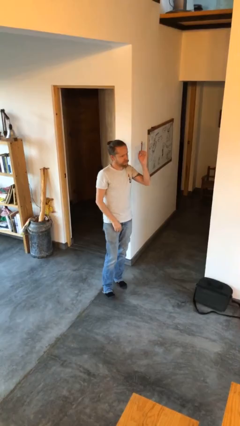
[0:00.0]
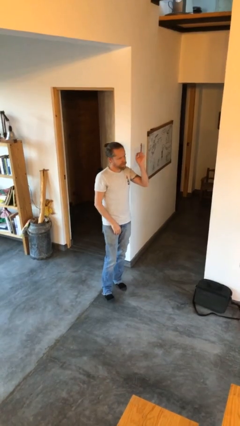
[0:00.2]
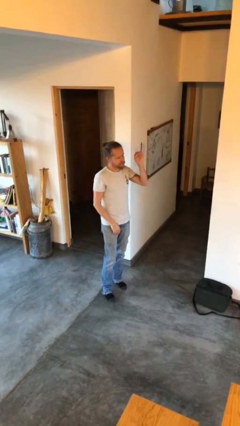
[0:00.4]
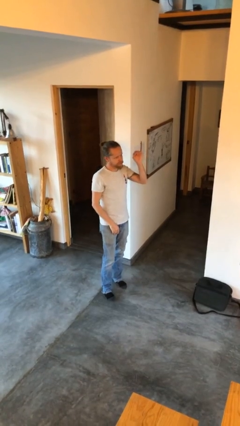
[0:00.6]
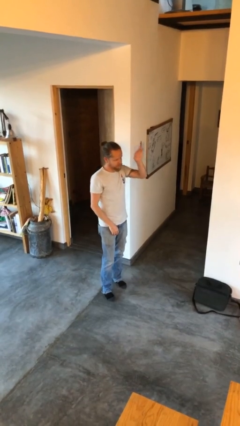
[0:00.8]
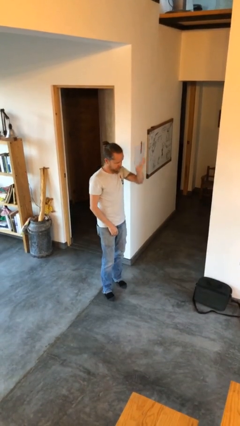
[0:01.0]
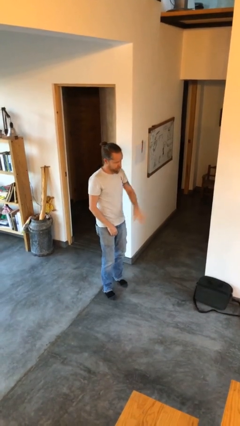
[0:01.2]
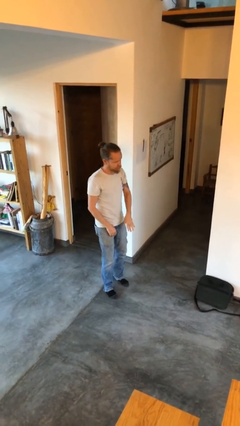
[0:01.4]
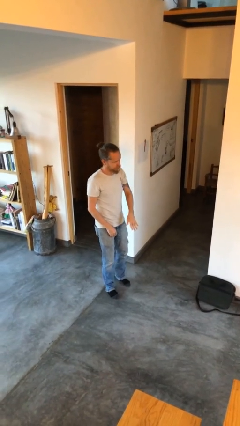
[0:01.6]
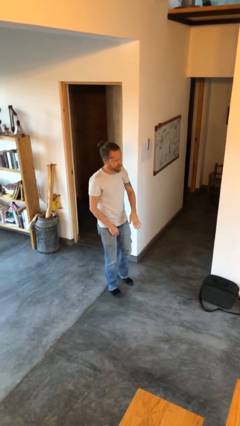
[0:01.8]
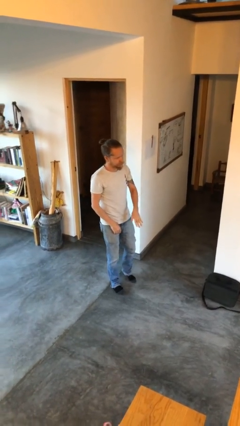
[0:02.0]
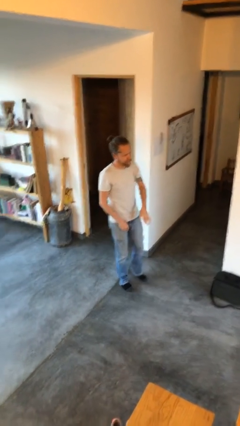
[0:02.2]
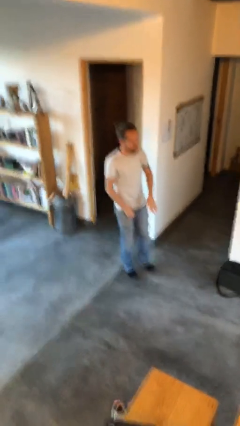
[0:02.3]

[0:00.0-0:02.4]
person gestures swipe down

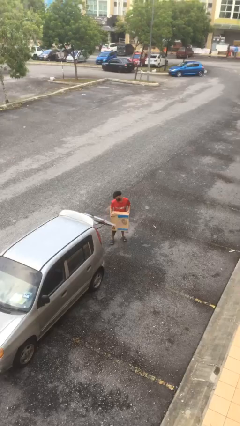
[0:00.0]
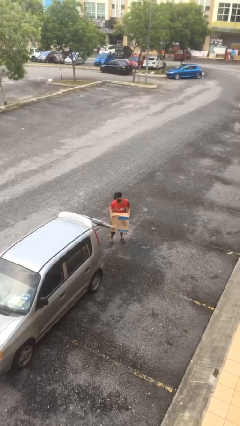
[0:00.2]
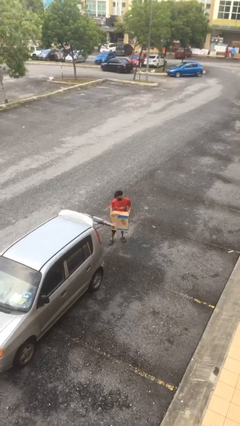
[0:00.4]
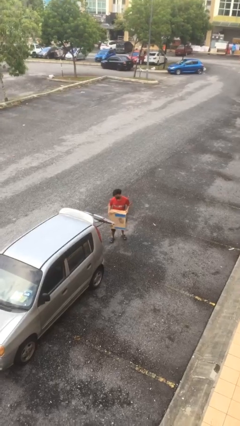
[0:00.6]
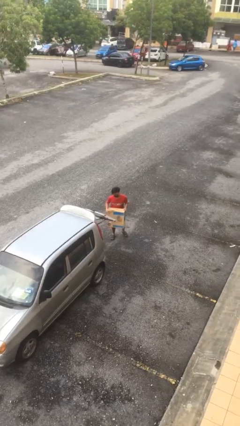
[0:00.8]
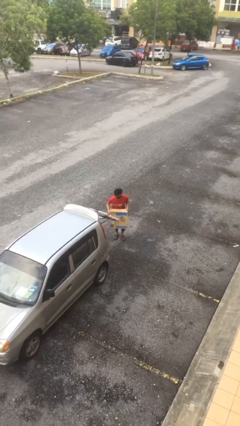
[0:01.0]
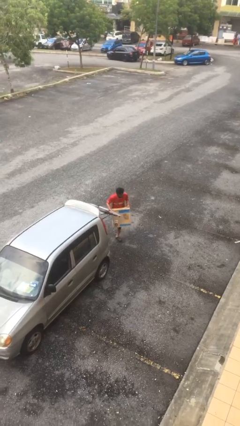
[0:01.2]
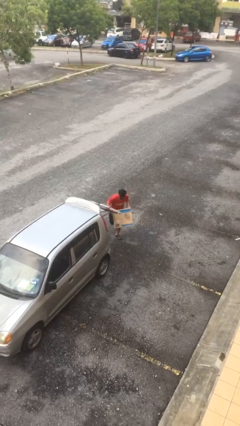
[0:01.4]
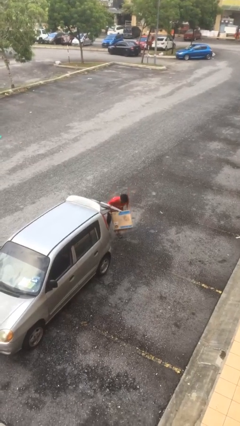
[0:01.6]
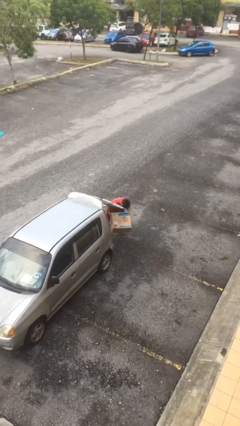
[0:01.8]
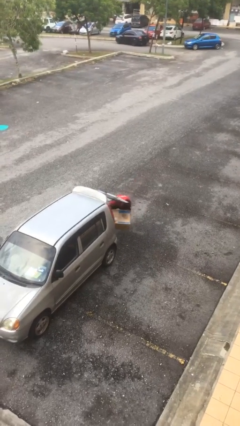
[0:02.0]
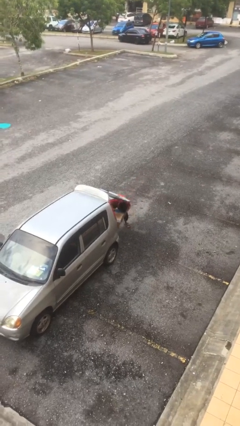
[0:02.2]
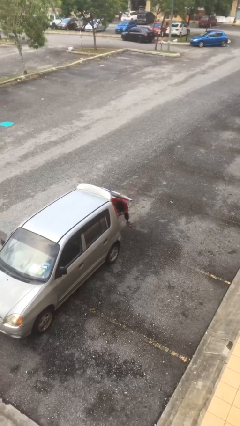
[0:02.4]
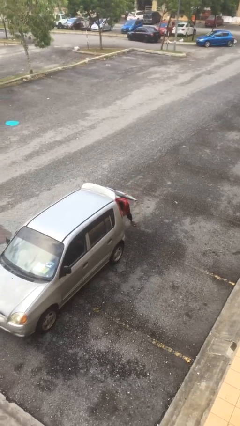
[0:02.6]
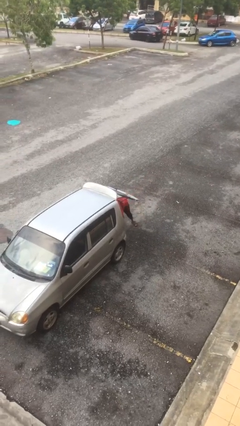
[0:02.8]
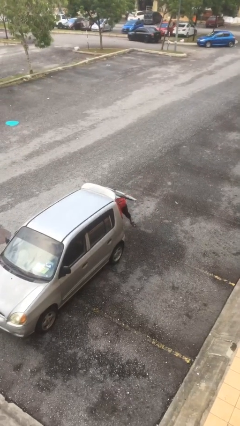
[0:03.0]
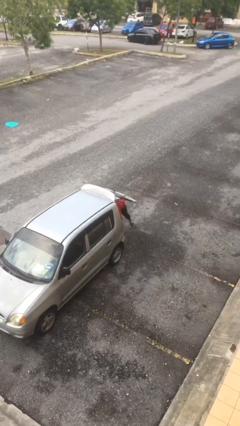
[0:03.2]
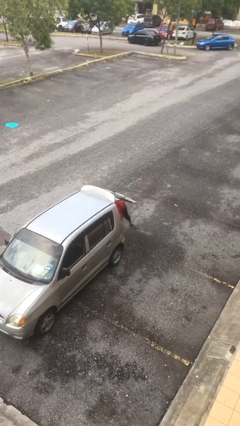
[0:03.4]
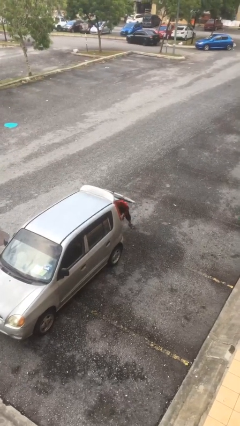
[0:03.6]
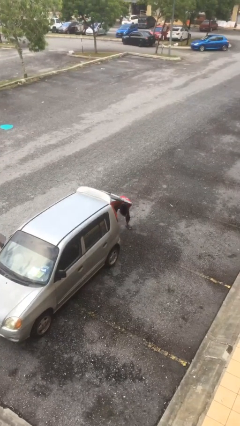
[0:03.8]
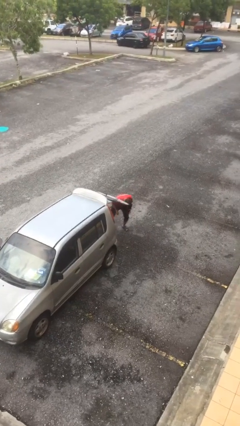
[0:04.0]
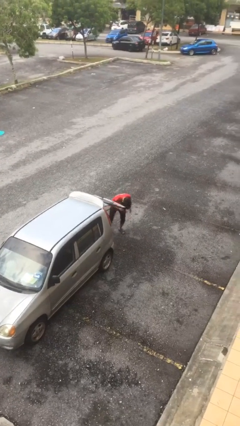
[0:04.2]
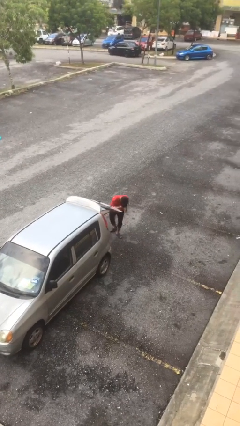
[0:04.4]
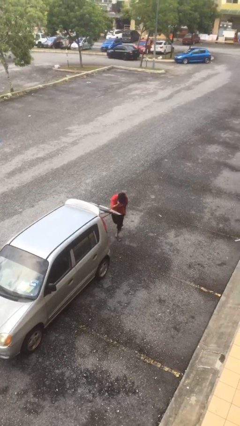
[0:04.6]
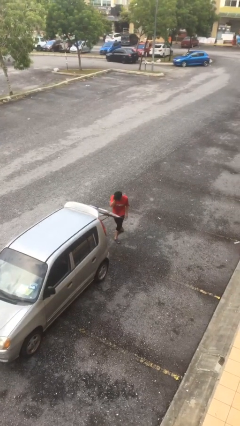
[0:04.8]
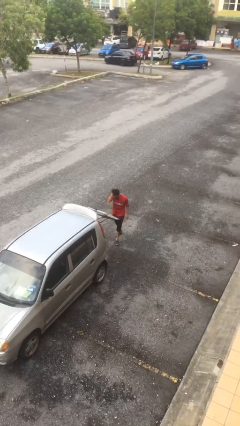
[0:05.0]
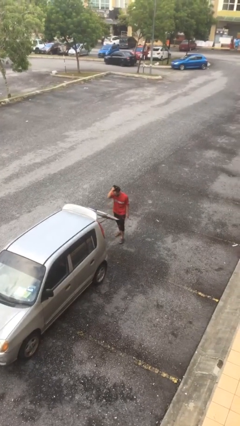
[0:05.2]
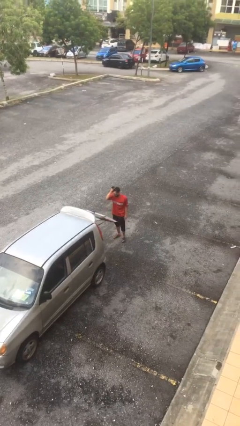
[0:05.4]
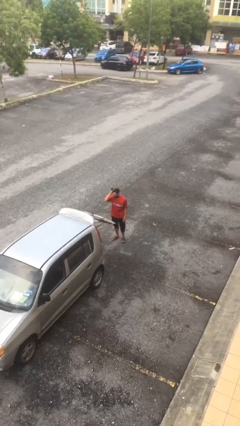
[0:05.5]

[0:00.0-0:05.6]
person loads car

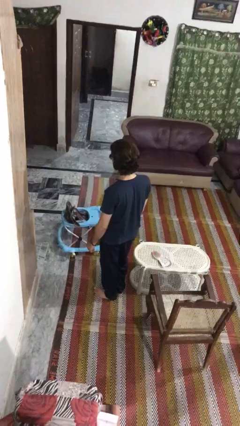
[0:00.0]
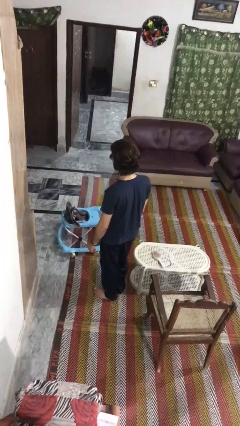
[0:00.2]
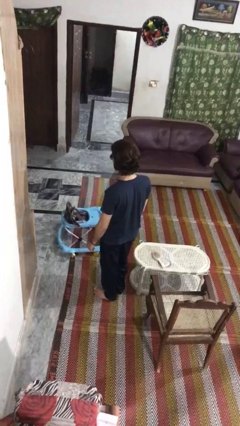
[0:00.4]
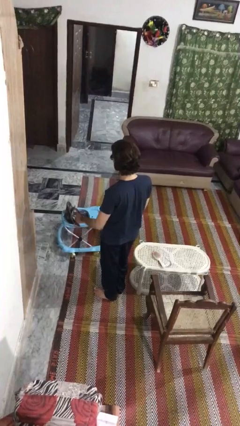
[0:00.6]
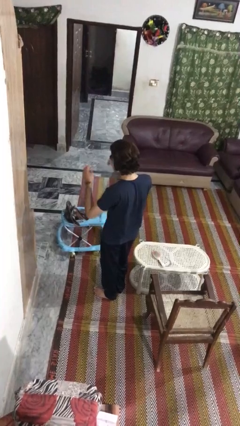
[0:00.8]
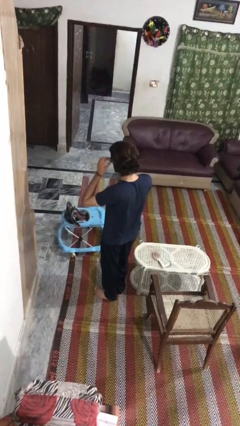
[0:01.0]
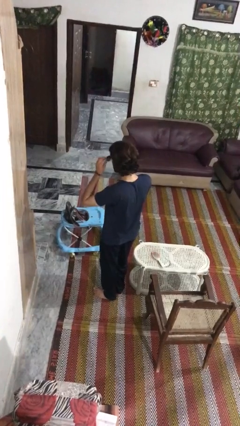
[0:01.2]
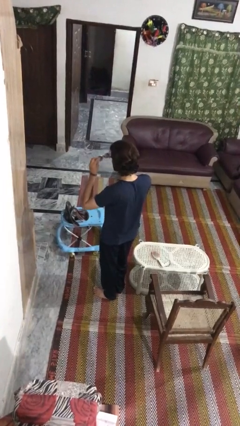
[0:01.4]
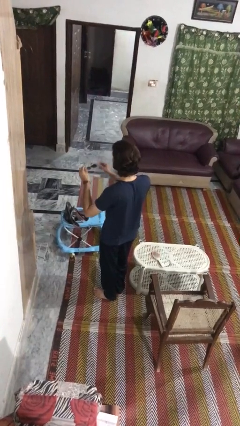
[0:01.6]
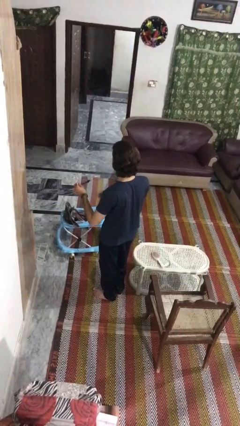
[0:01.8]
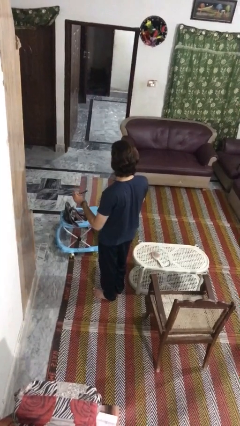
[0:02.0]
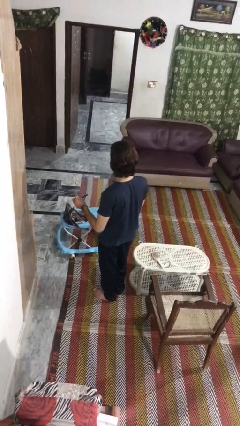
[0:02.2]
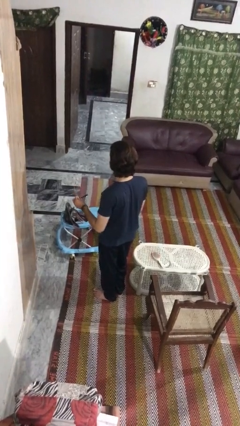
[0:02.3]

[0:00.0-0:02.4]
person takes off sunglasses

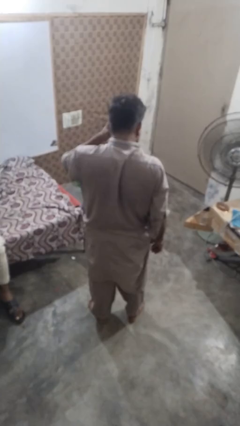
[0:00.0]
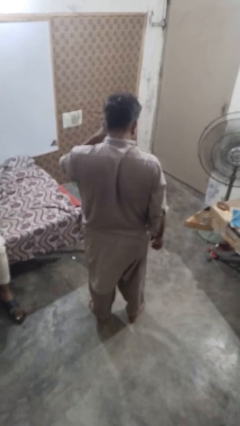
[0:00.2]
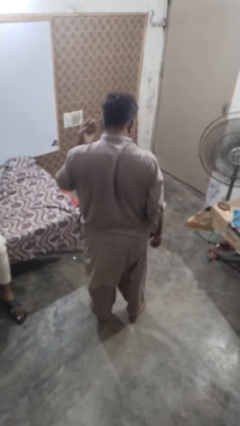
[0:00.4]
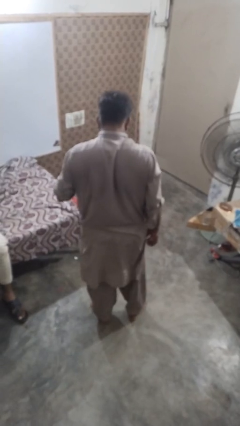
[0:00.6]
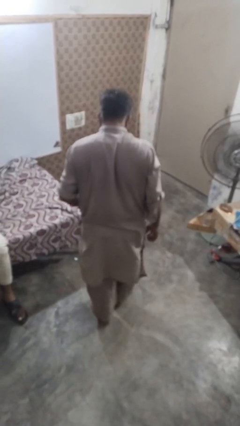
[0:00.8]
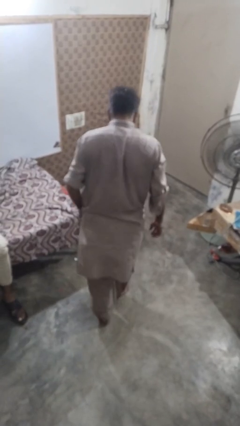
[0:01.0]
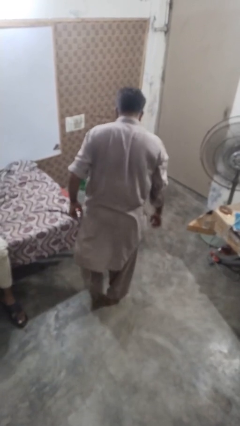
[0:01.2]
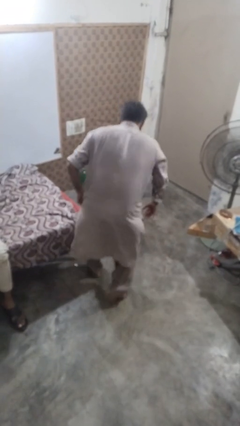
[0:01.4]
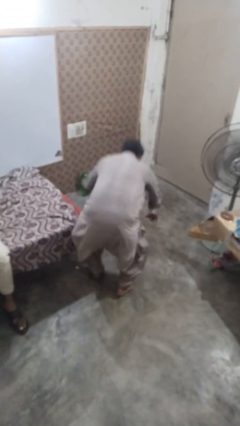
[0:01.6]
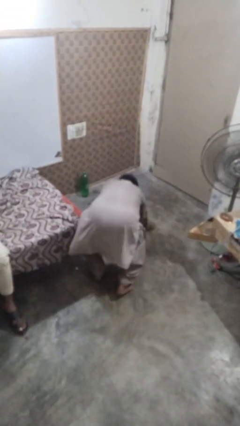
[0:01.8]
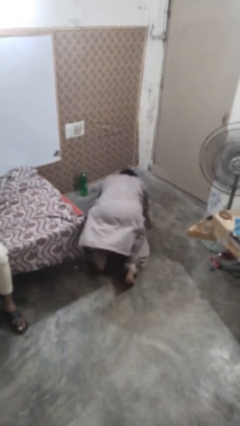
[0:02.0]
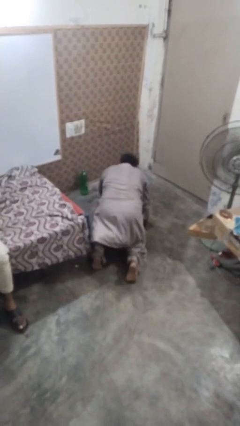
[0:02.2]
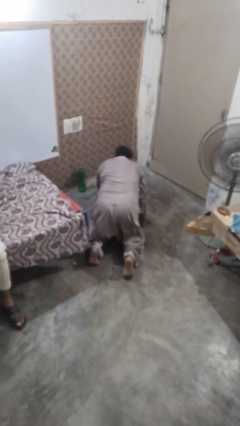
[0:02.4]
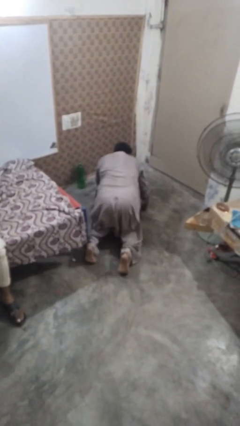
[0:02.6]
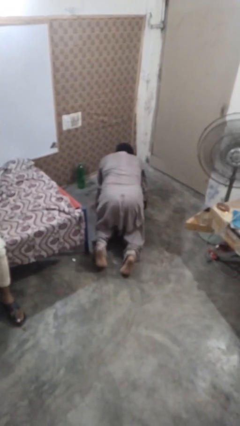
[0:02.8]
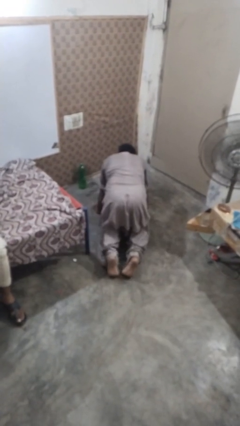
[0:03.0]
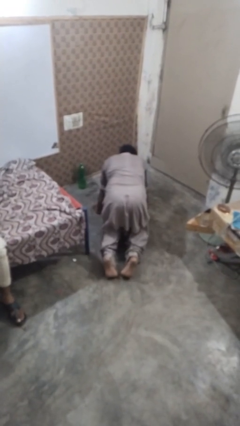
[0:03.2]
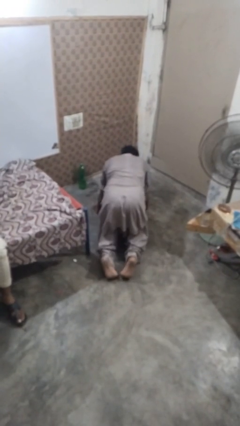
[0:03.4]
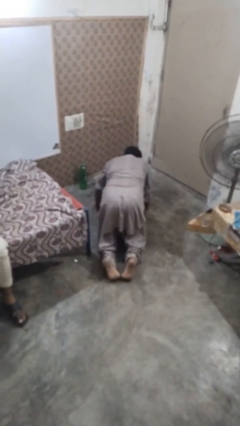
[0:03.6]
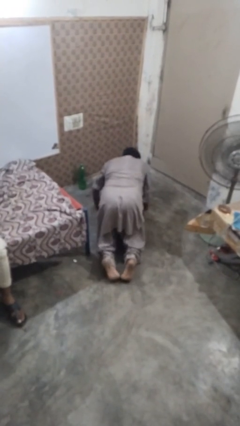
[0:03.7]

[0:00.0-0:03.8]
person trips on object on floor

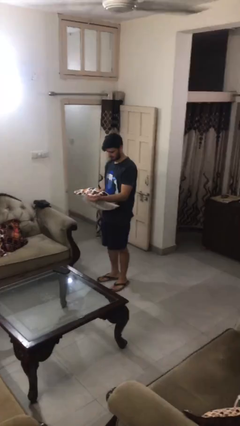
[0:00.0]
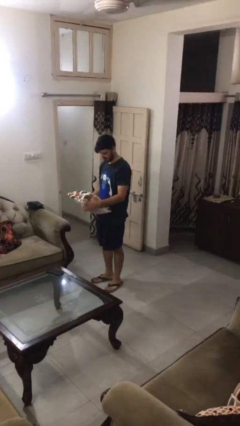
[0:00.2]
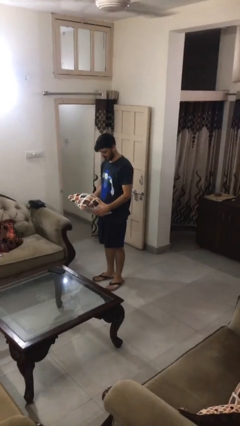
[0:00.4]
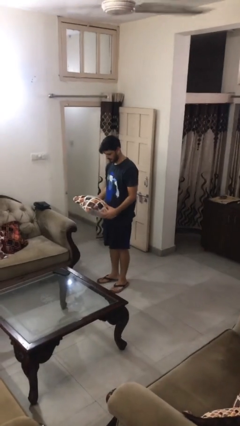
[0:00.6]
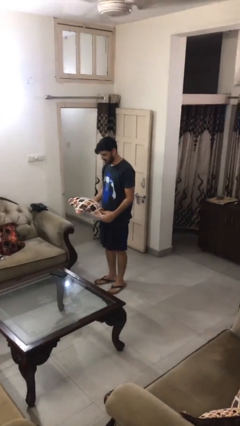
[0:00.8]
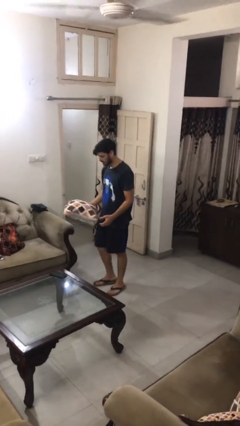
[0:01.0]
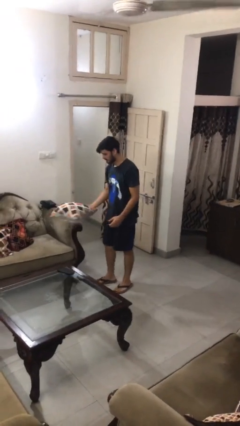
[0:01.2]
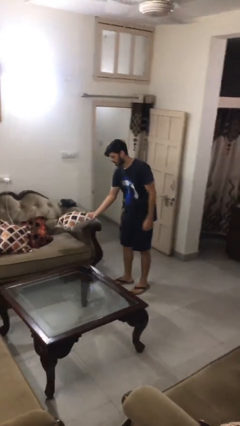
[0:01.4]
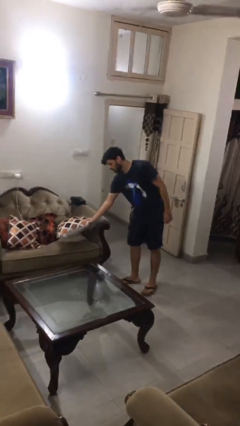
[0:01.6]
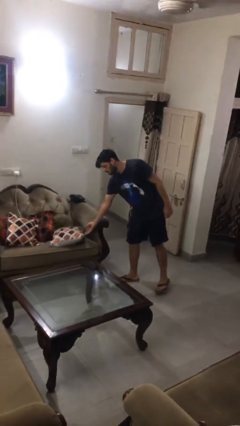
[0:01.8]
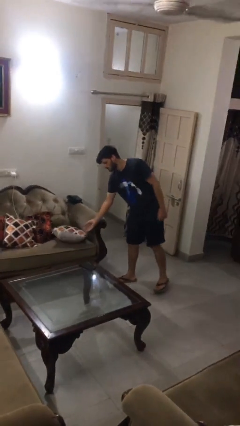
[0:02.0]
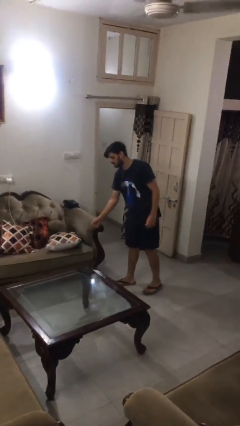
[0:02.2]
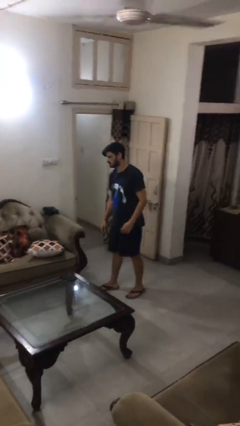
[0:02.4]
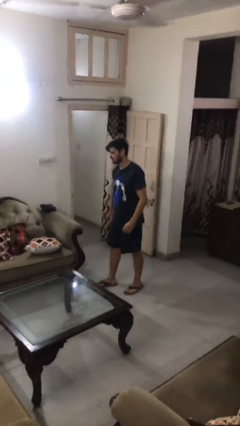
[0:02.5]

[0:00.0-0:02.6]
person puts down object on couch

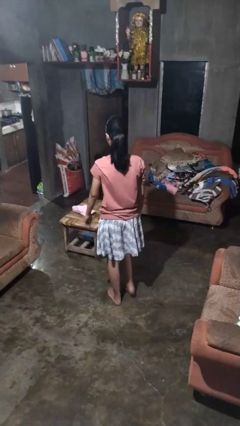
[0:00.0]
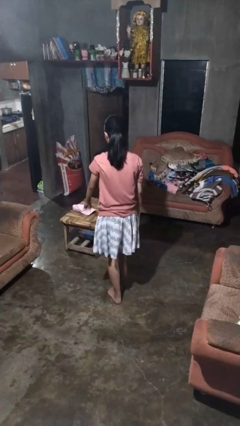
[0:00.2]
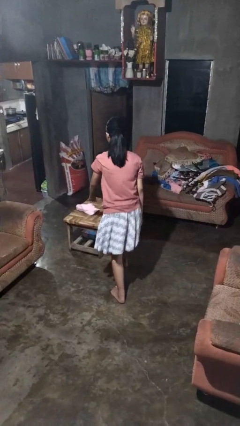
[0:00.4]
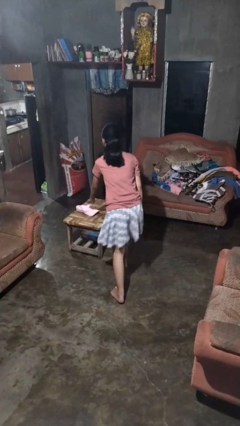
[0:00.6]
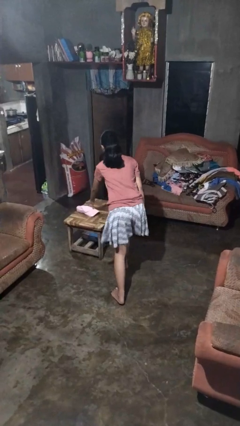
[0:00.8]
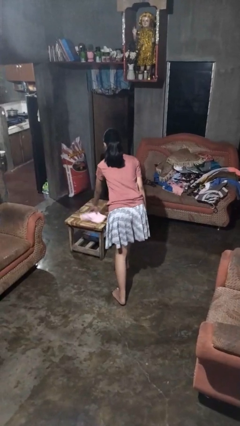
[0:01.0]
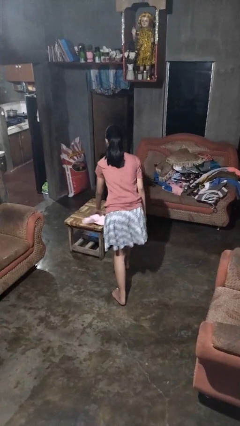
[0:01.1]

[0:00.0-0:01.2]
person picks up object from table
